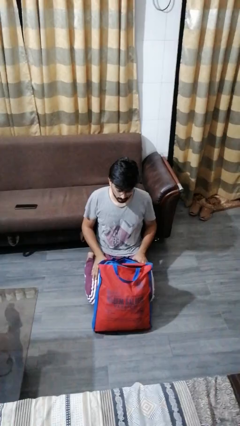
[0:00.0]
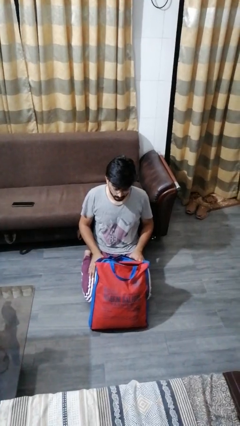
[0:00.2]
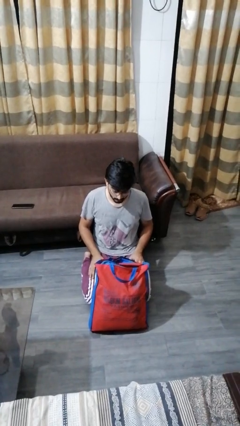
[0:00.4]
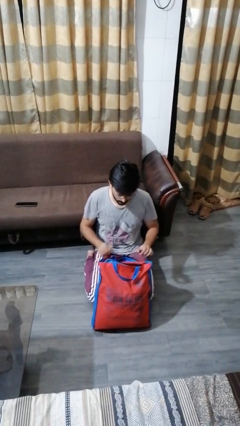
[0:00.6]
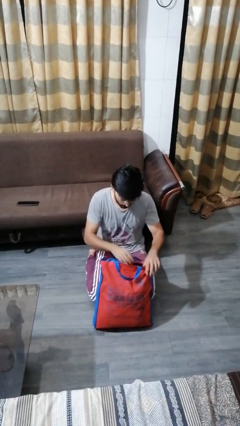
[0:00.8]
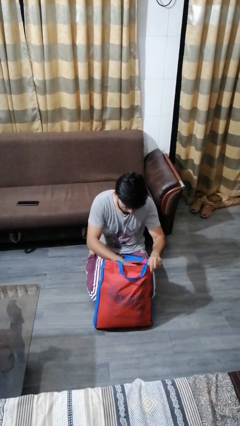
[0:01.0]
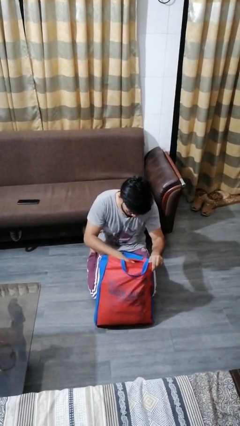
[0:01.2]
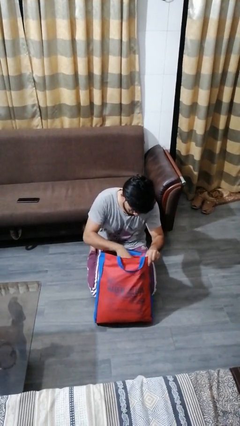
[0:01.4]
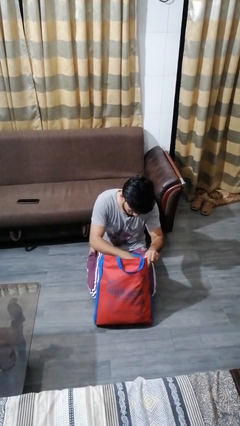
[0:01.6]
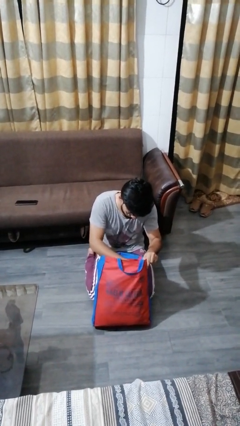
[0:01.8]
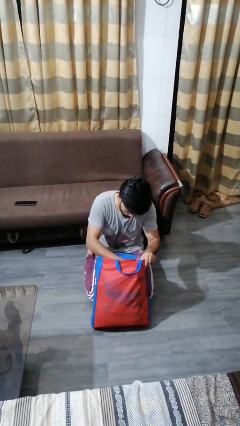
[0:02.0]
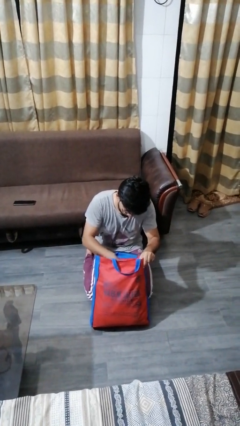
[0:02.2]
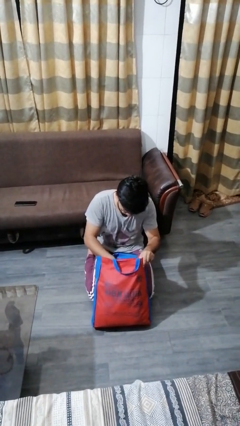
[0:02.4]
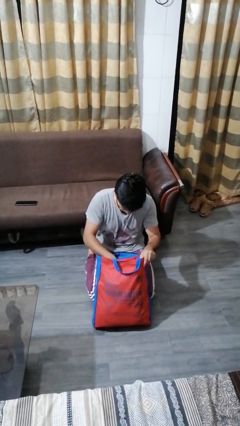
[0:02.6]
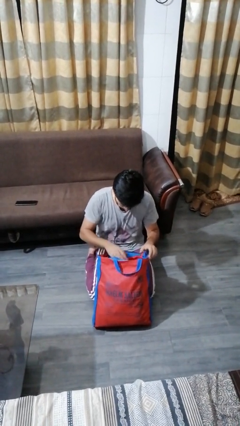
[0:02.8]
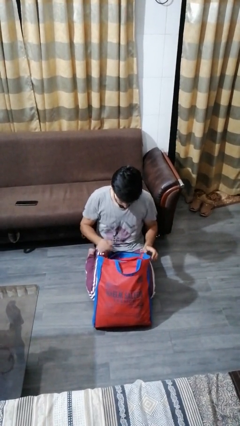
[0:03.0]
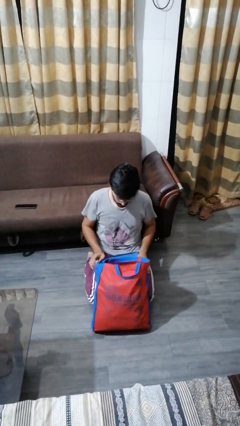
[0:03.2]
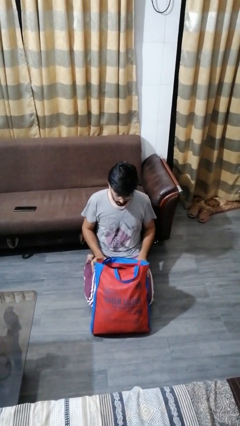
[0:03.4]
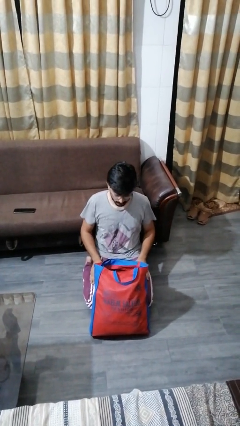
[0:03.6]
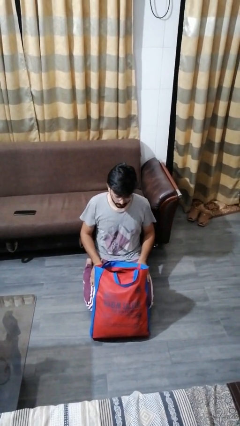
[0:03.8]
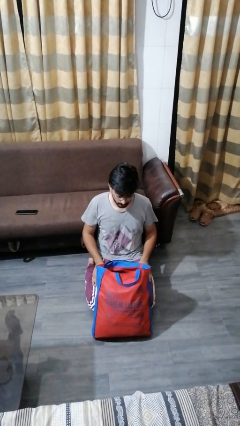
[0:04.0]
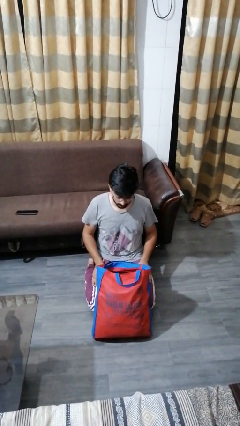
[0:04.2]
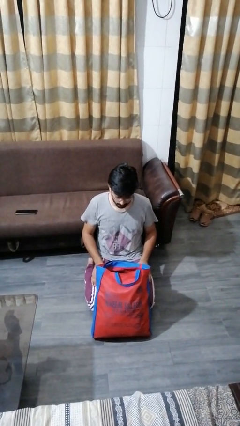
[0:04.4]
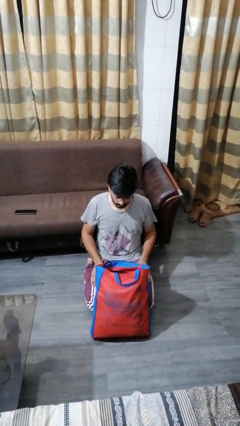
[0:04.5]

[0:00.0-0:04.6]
person searches in bag

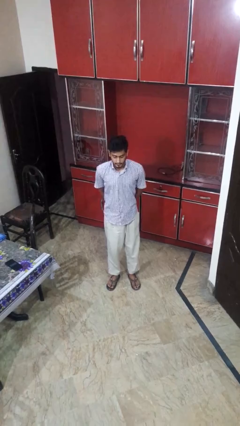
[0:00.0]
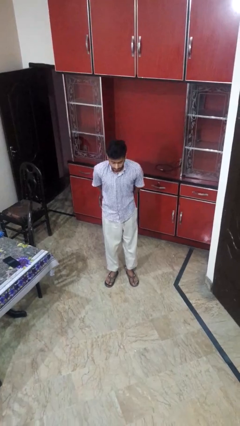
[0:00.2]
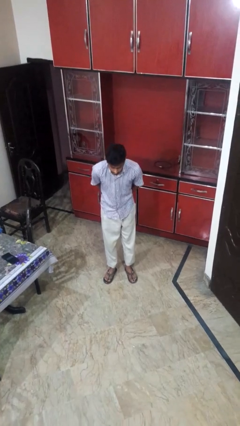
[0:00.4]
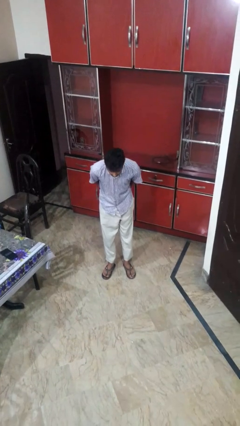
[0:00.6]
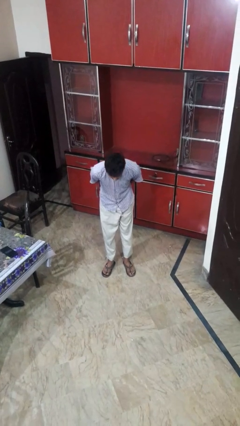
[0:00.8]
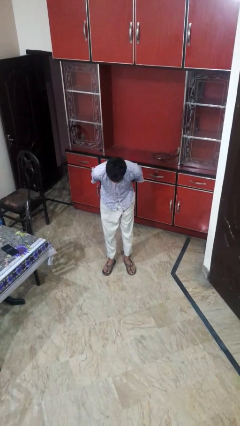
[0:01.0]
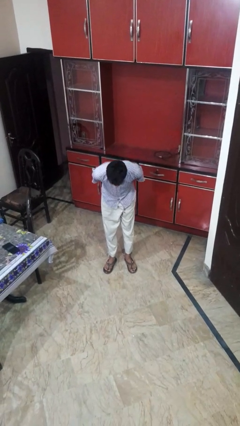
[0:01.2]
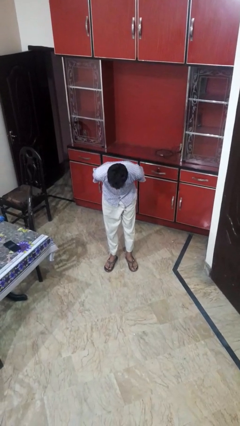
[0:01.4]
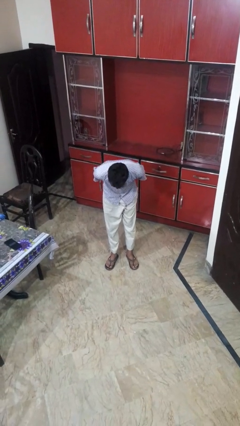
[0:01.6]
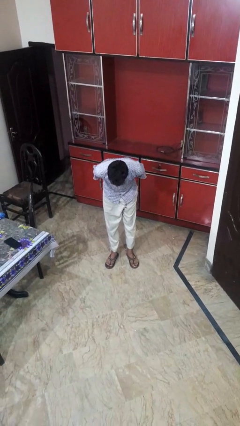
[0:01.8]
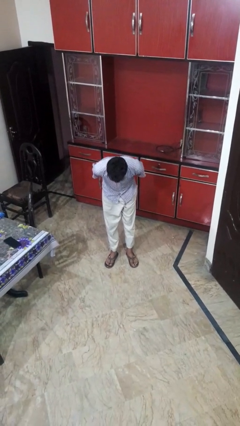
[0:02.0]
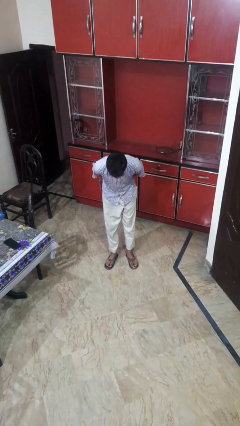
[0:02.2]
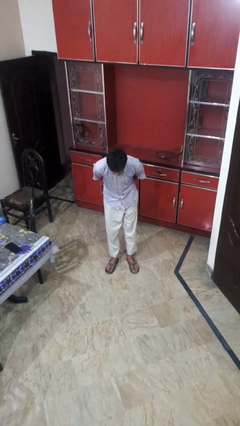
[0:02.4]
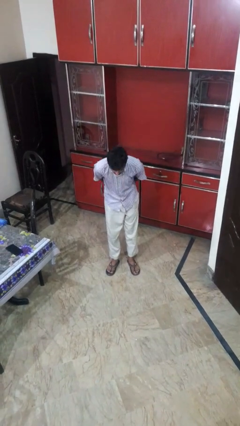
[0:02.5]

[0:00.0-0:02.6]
person bows

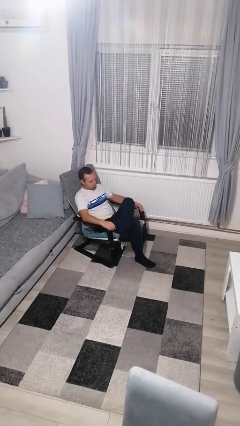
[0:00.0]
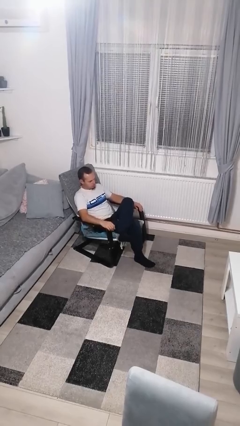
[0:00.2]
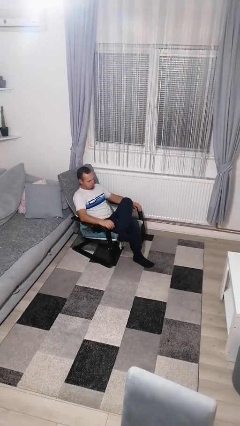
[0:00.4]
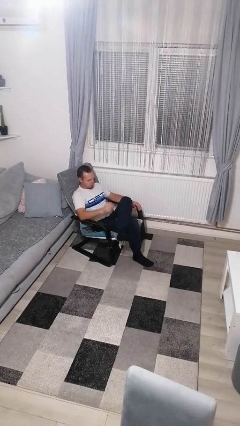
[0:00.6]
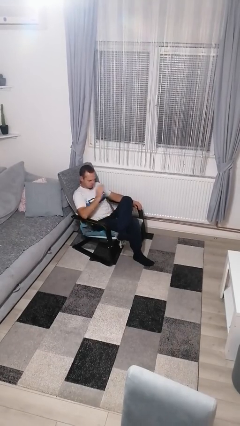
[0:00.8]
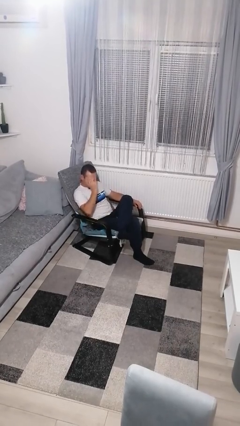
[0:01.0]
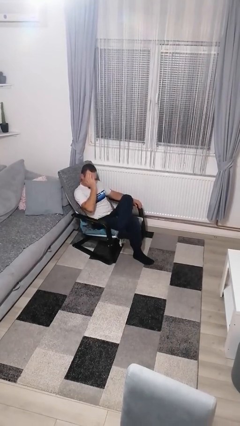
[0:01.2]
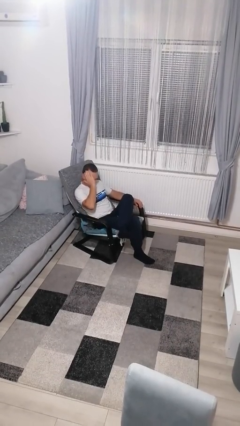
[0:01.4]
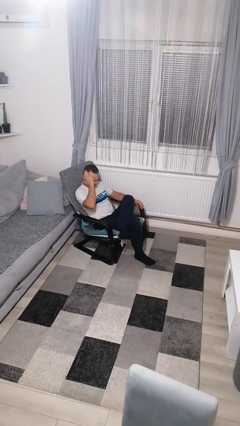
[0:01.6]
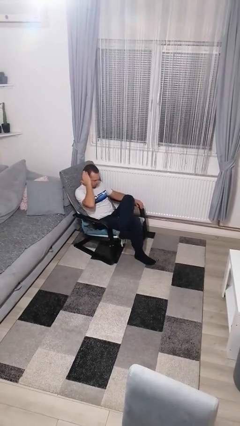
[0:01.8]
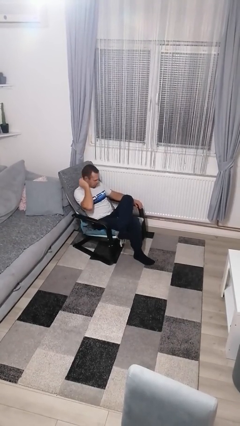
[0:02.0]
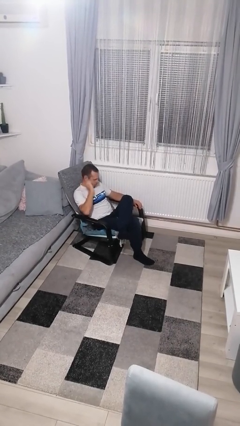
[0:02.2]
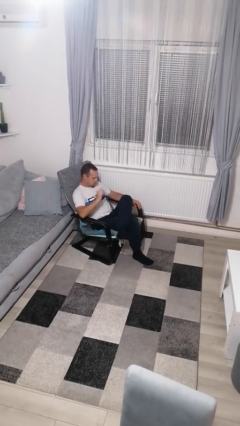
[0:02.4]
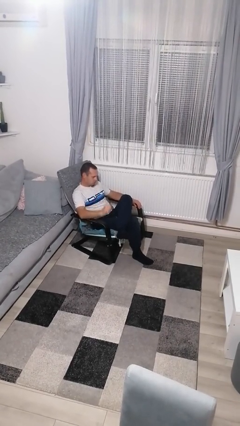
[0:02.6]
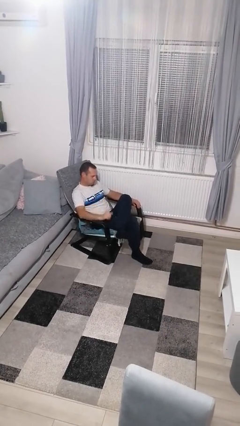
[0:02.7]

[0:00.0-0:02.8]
person strokes hair

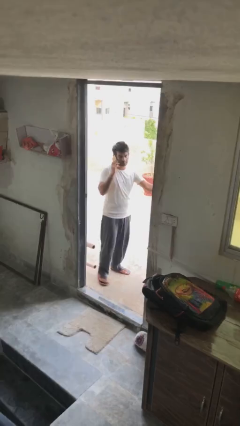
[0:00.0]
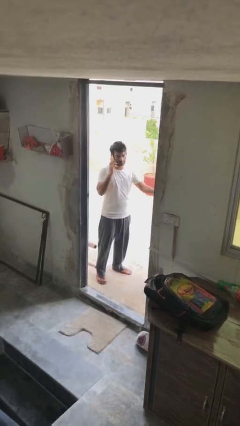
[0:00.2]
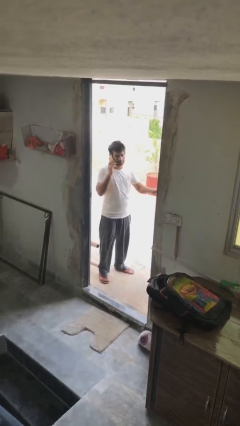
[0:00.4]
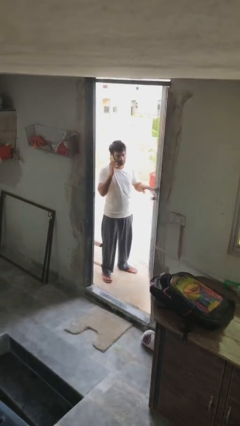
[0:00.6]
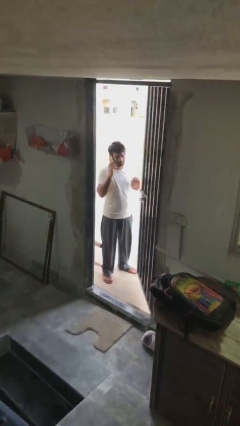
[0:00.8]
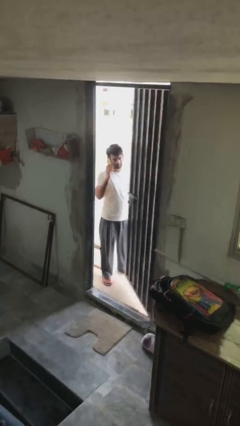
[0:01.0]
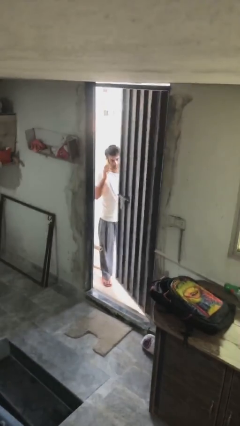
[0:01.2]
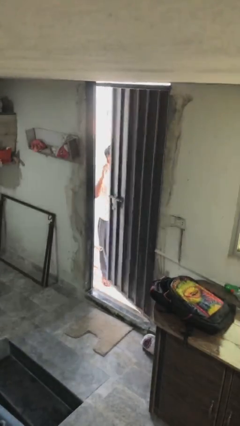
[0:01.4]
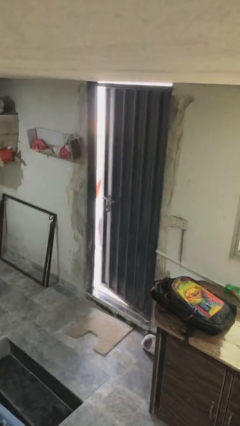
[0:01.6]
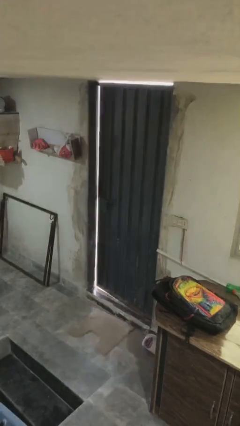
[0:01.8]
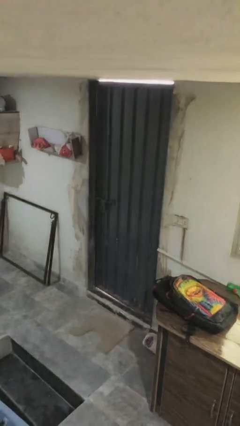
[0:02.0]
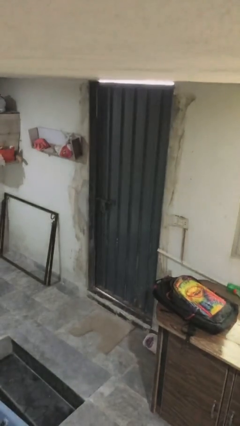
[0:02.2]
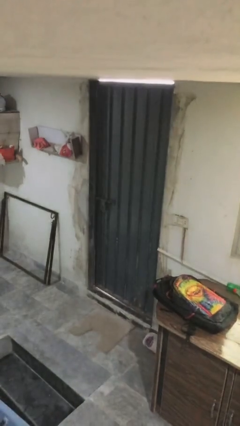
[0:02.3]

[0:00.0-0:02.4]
person closes facility door

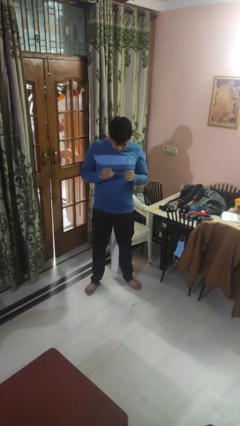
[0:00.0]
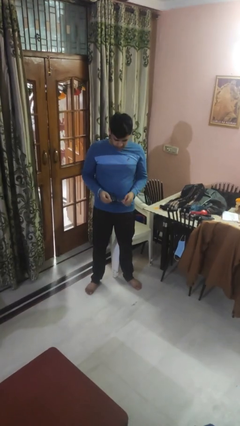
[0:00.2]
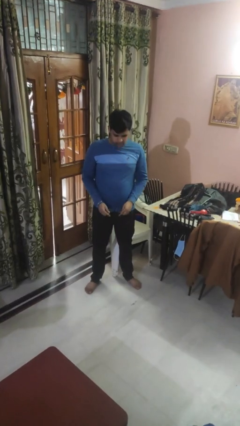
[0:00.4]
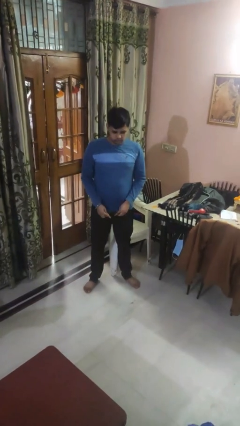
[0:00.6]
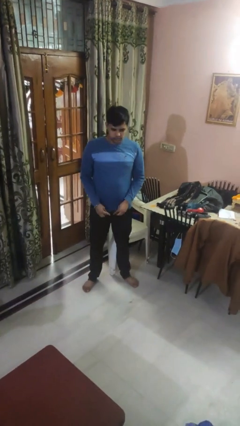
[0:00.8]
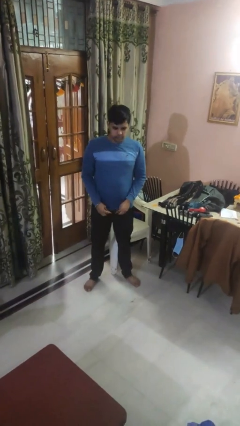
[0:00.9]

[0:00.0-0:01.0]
person takes off glasses

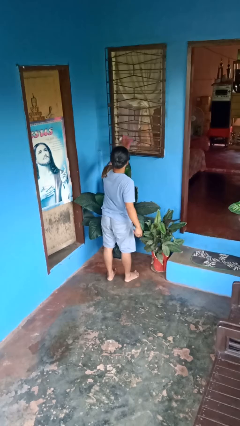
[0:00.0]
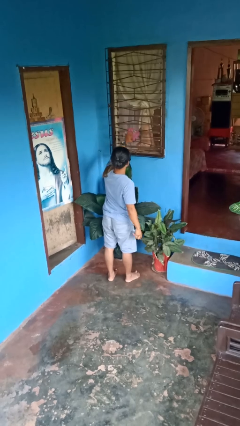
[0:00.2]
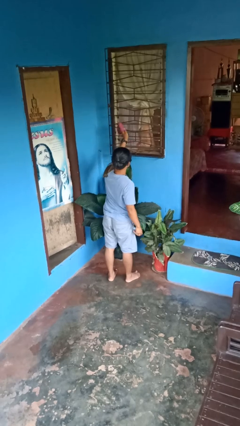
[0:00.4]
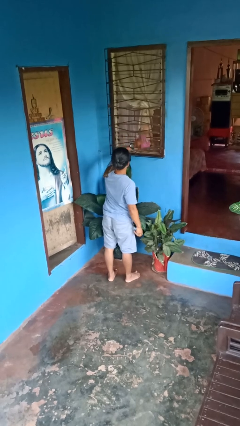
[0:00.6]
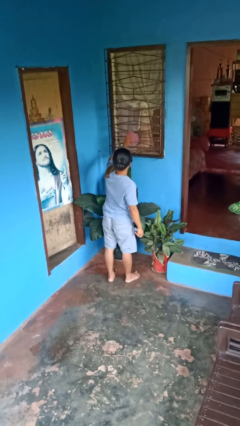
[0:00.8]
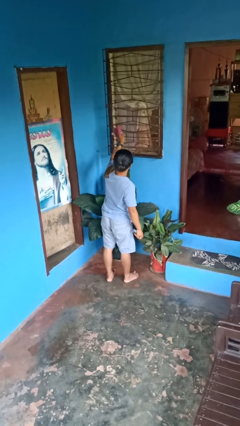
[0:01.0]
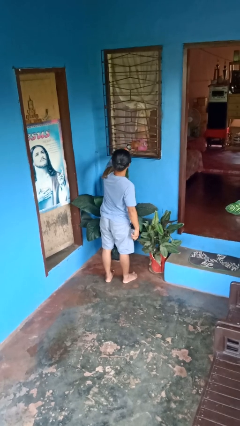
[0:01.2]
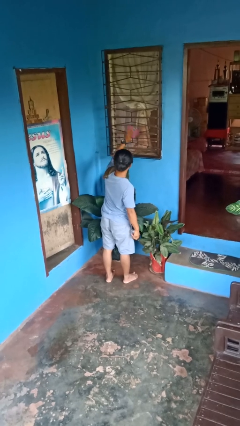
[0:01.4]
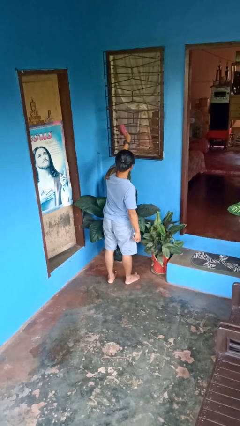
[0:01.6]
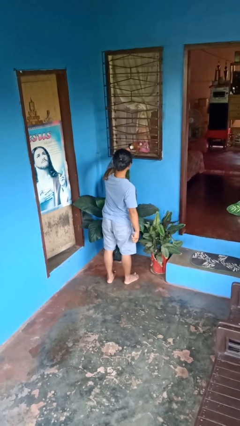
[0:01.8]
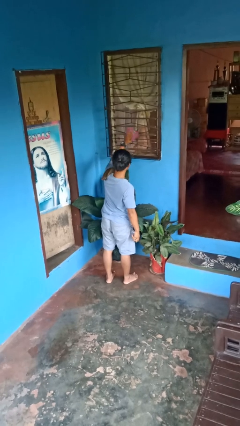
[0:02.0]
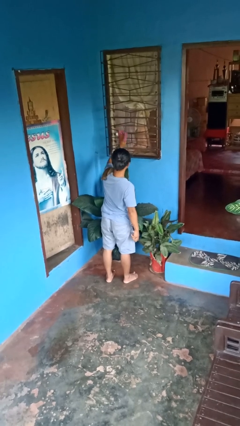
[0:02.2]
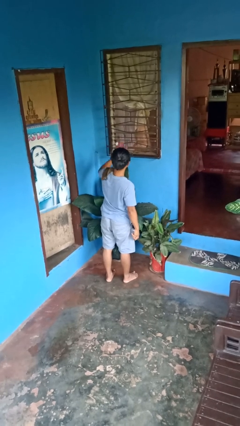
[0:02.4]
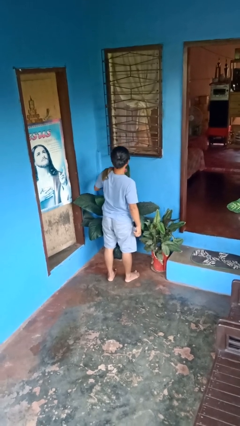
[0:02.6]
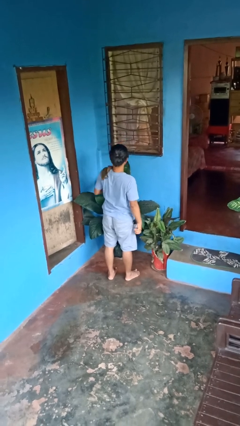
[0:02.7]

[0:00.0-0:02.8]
person washes window

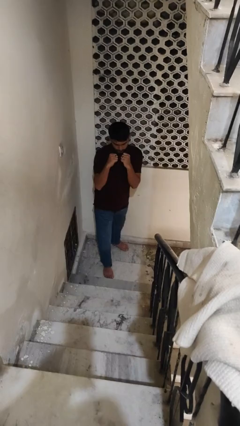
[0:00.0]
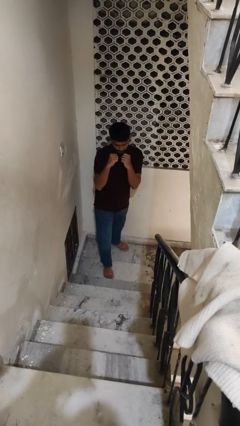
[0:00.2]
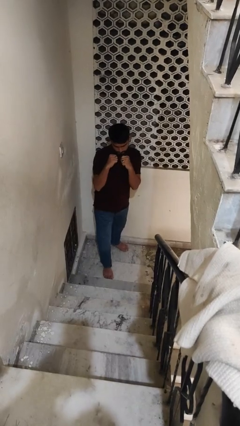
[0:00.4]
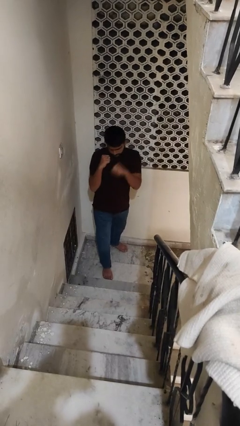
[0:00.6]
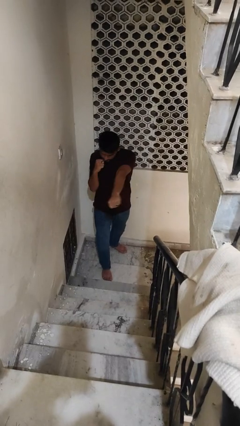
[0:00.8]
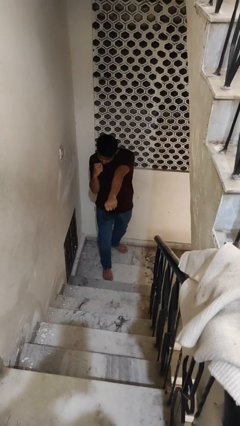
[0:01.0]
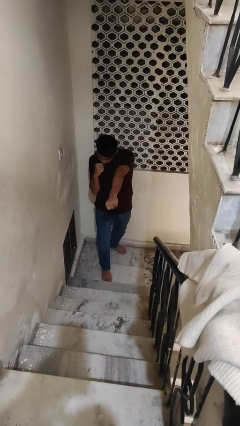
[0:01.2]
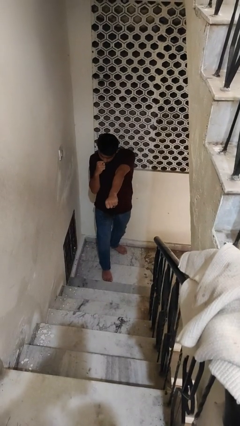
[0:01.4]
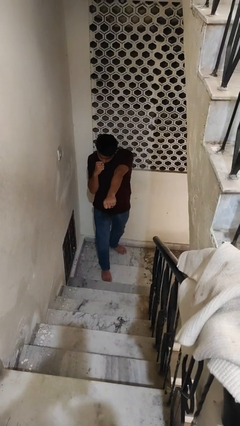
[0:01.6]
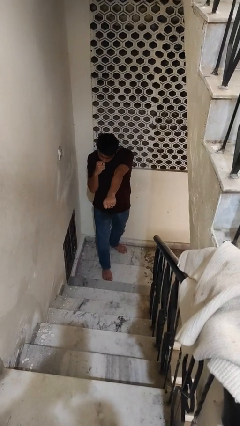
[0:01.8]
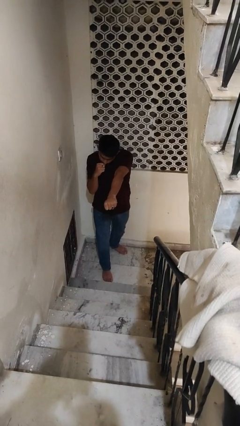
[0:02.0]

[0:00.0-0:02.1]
person punches
